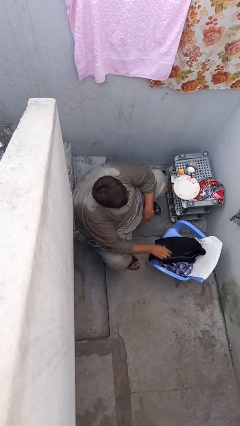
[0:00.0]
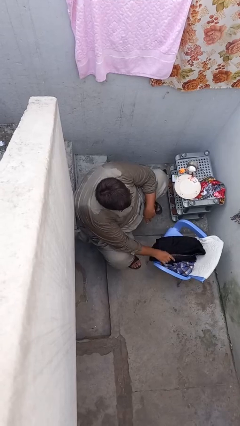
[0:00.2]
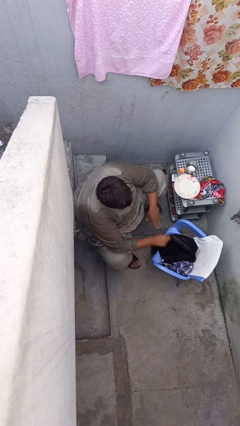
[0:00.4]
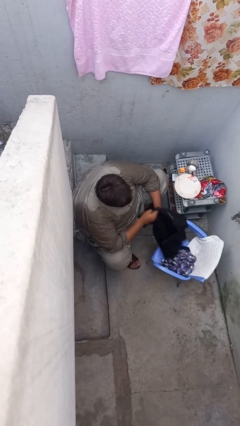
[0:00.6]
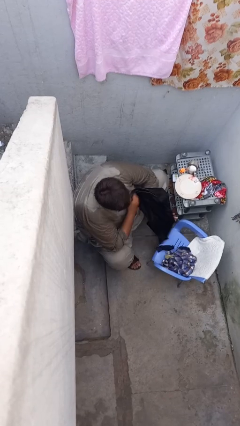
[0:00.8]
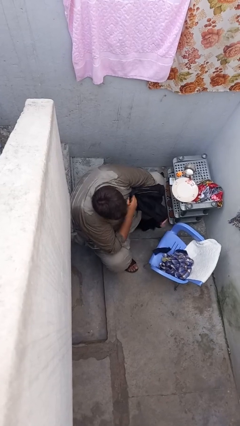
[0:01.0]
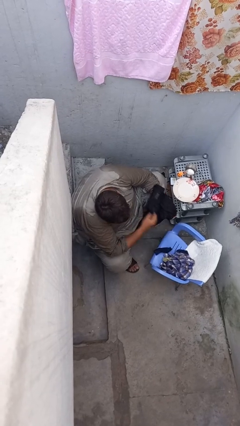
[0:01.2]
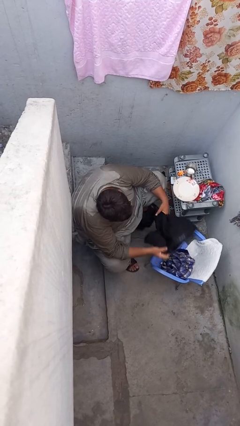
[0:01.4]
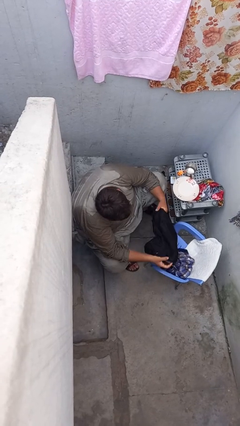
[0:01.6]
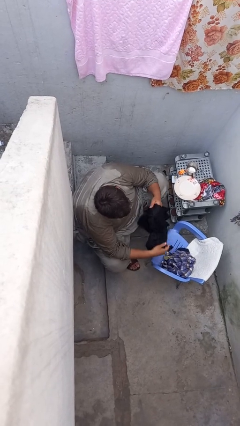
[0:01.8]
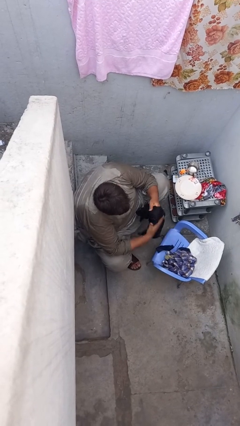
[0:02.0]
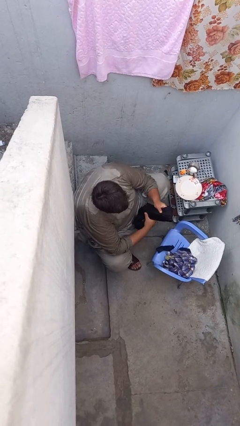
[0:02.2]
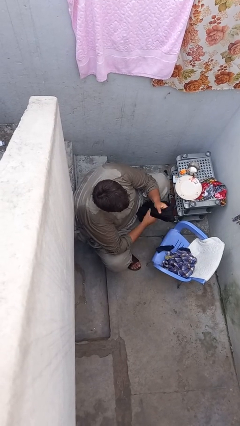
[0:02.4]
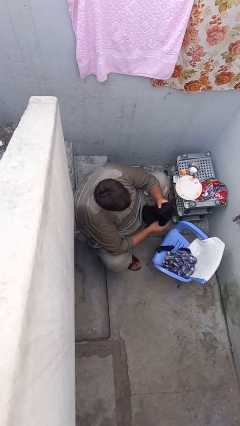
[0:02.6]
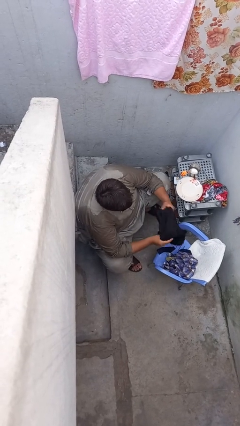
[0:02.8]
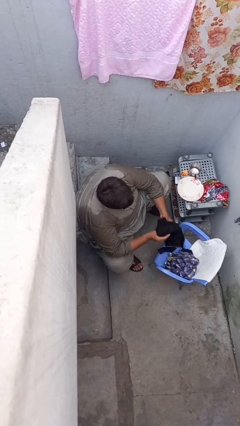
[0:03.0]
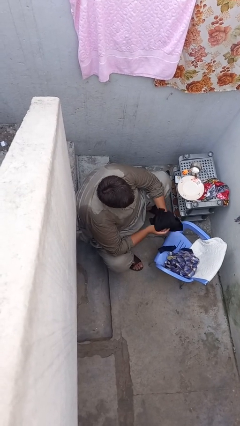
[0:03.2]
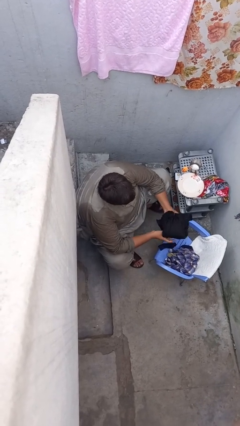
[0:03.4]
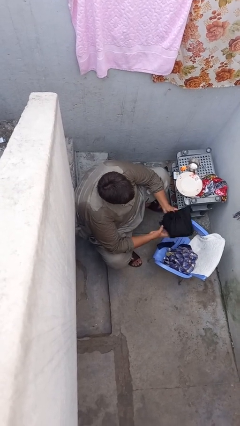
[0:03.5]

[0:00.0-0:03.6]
person folds pants

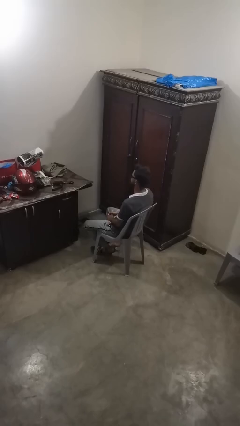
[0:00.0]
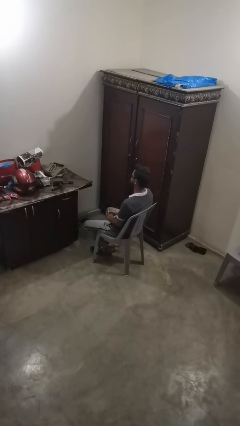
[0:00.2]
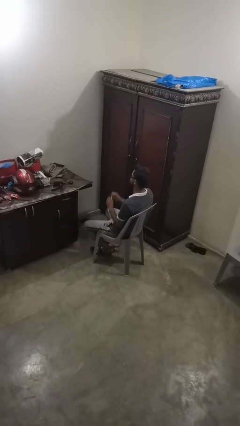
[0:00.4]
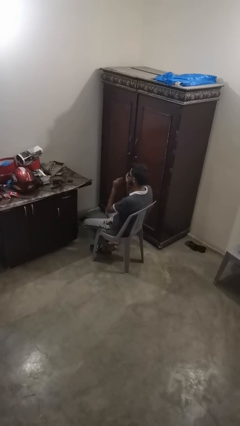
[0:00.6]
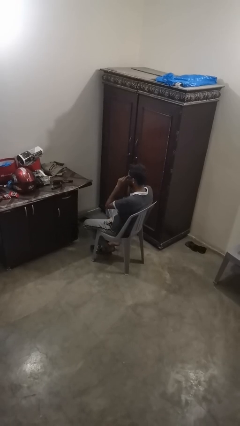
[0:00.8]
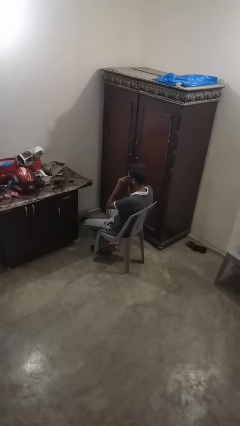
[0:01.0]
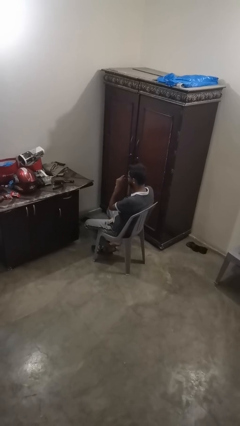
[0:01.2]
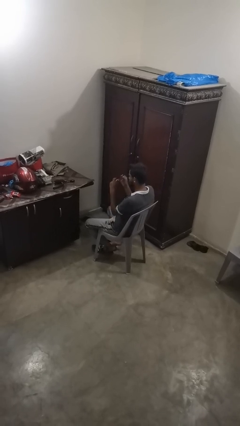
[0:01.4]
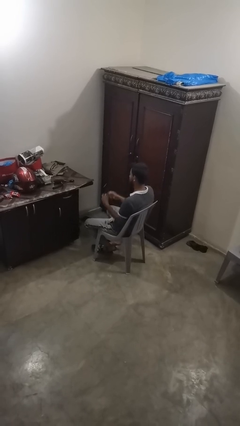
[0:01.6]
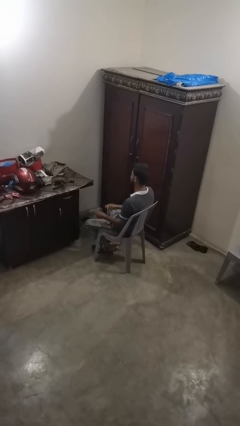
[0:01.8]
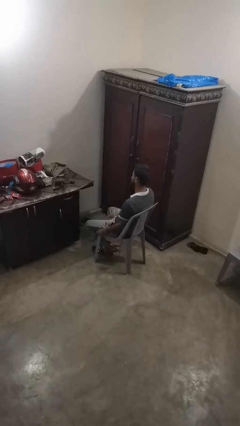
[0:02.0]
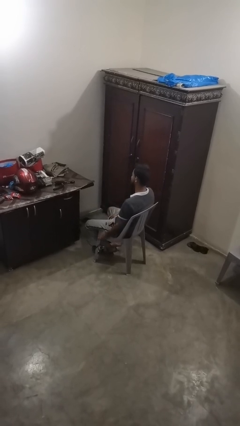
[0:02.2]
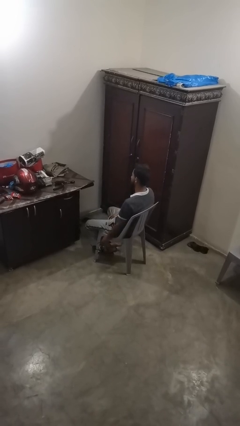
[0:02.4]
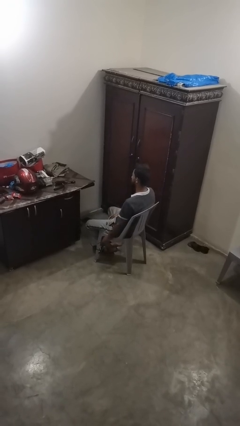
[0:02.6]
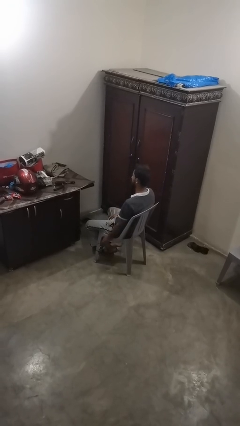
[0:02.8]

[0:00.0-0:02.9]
person takes off sunglasses

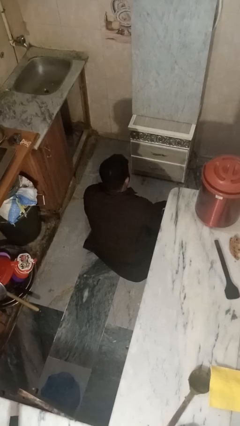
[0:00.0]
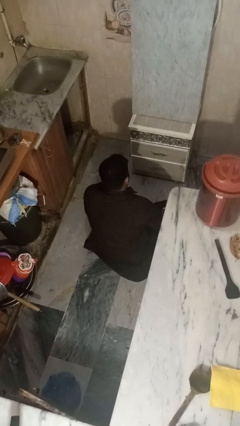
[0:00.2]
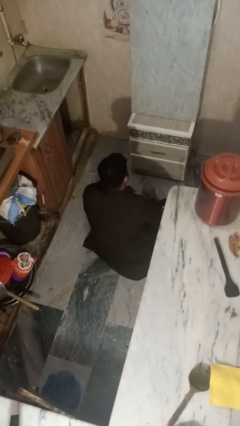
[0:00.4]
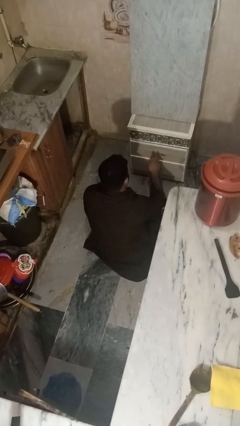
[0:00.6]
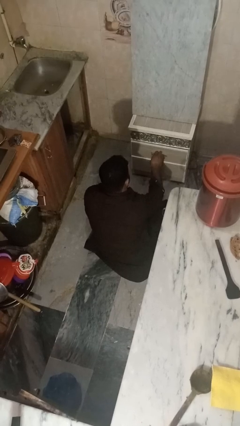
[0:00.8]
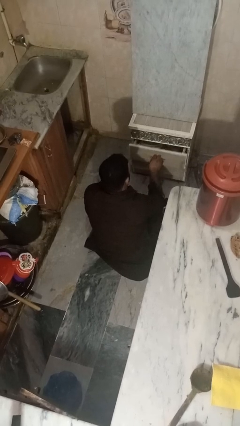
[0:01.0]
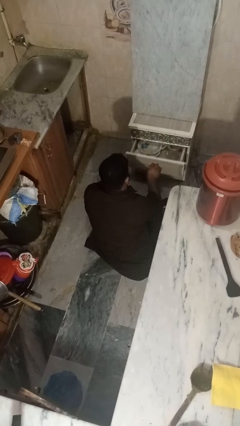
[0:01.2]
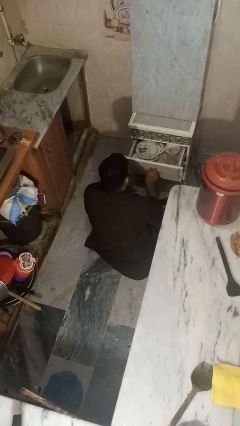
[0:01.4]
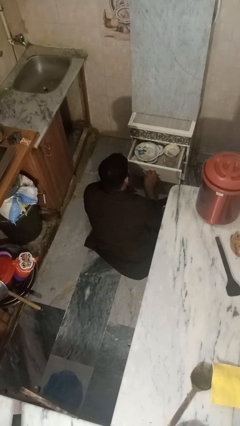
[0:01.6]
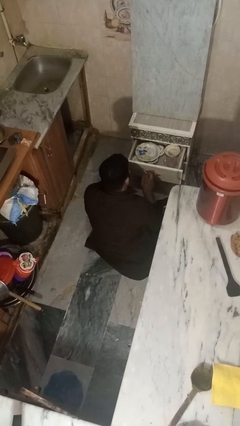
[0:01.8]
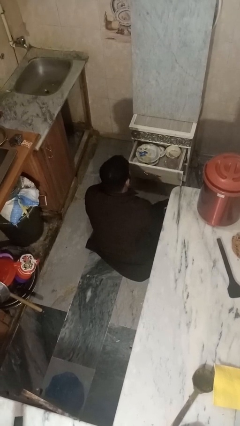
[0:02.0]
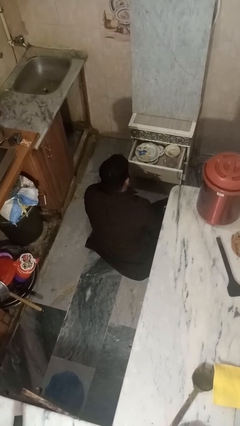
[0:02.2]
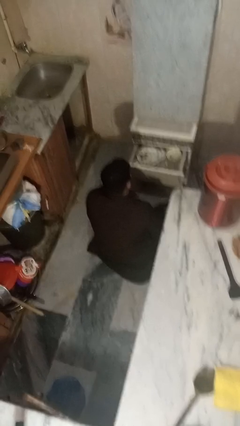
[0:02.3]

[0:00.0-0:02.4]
person opens kitchen drawer

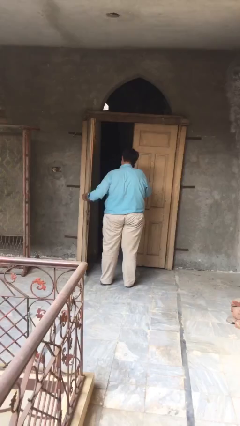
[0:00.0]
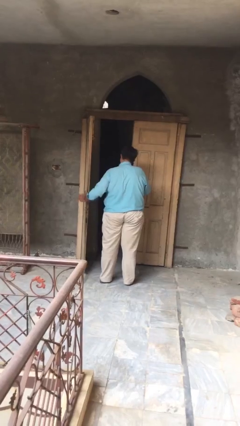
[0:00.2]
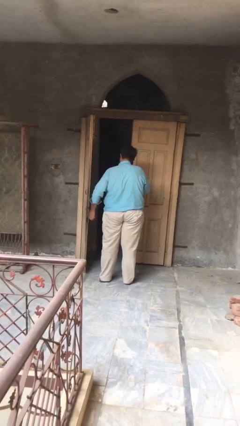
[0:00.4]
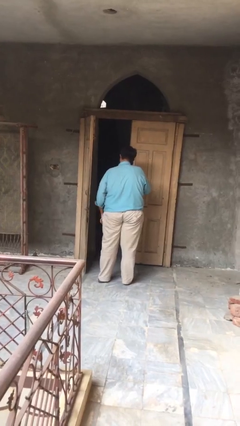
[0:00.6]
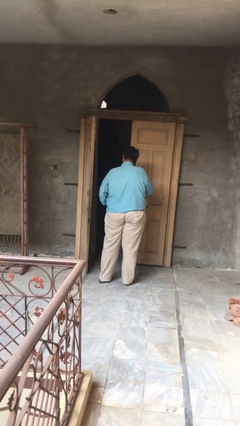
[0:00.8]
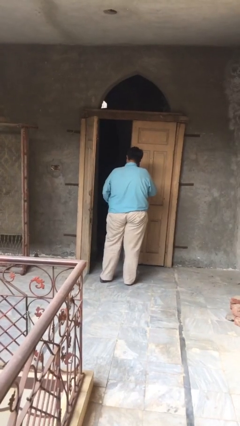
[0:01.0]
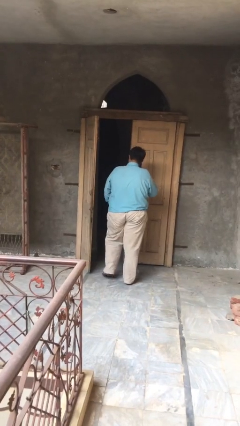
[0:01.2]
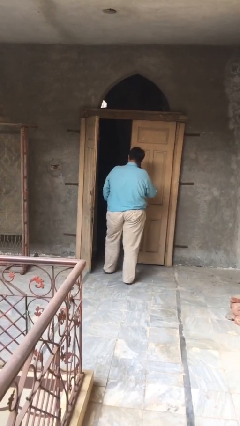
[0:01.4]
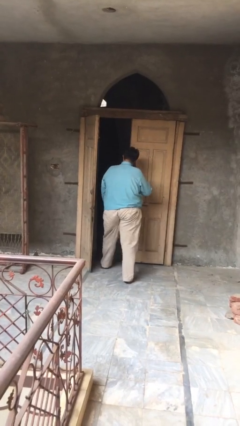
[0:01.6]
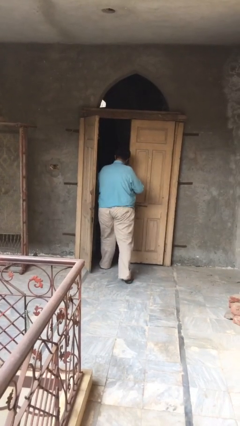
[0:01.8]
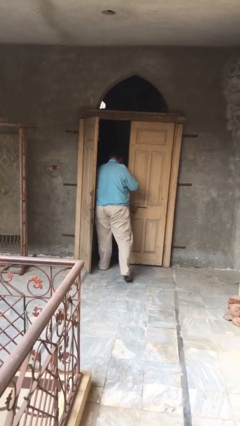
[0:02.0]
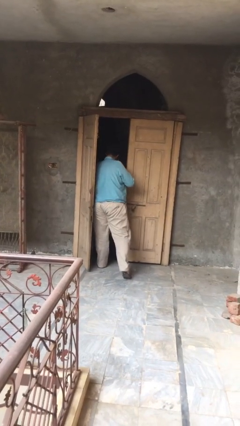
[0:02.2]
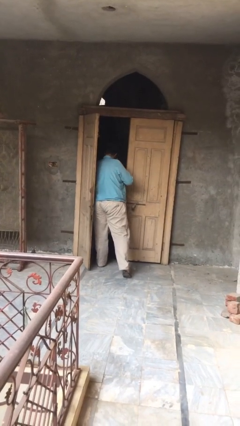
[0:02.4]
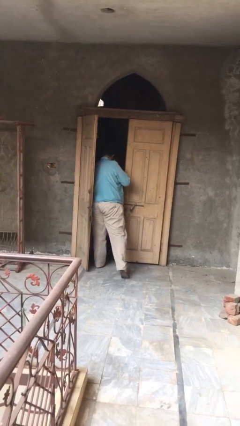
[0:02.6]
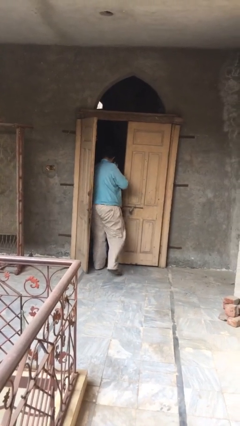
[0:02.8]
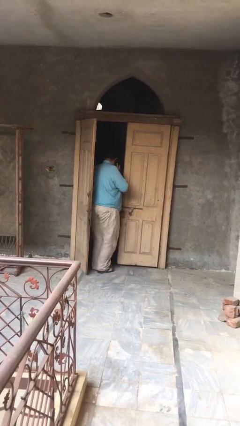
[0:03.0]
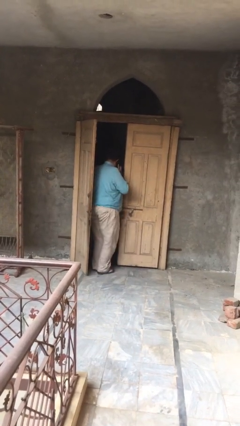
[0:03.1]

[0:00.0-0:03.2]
person exits scene through structure

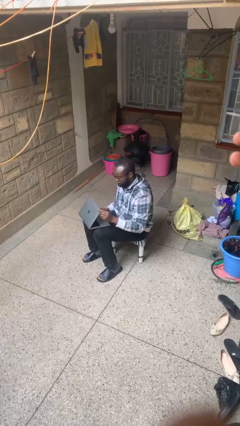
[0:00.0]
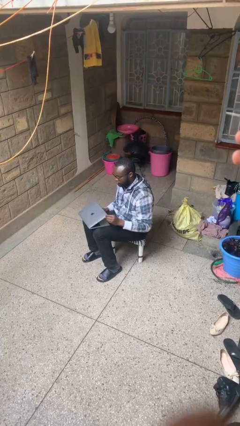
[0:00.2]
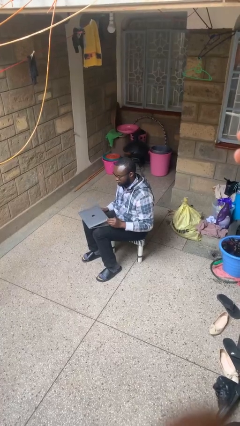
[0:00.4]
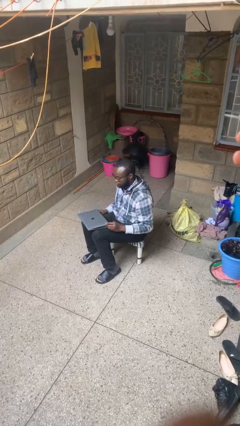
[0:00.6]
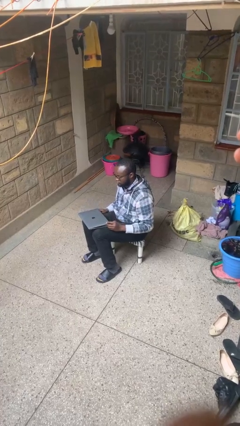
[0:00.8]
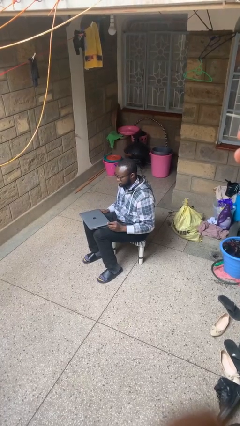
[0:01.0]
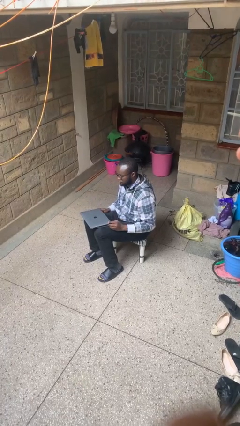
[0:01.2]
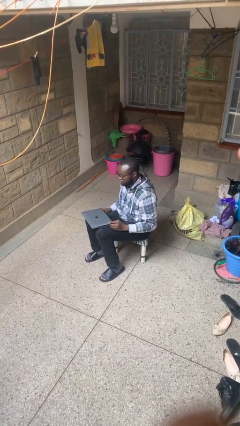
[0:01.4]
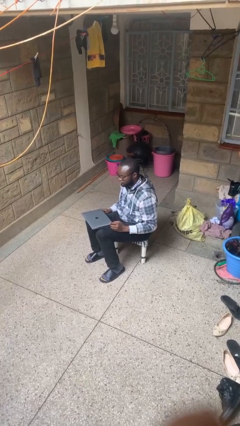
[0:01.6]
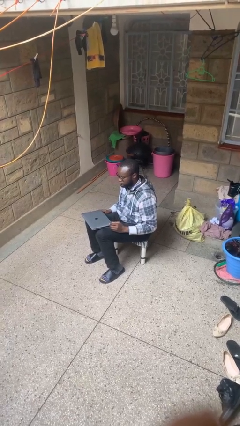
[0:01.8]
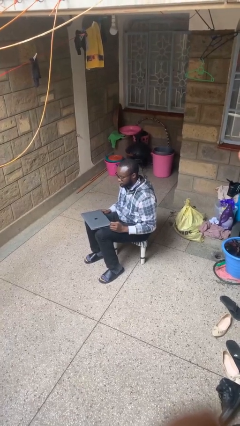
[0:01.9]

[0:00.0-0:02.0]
person closes laptop

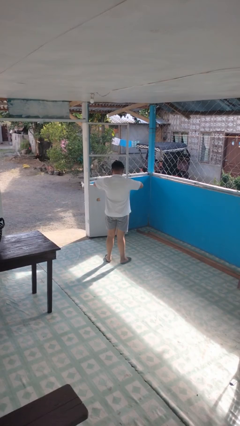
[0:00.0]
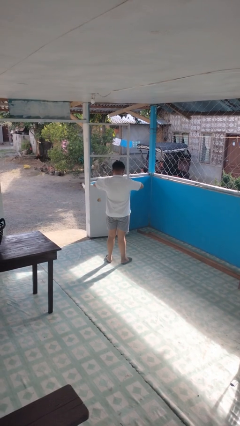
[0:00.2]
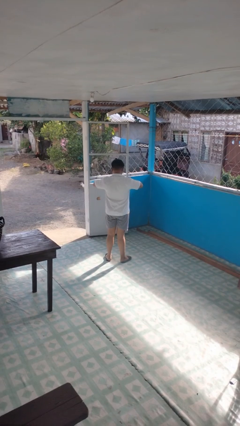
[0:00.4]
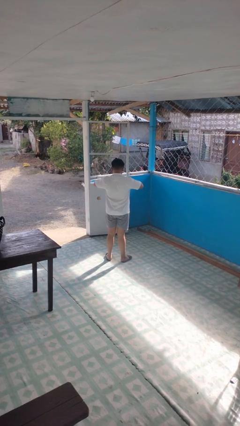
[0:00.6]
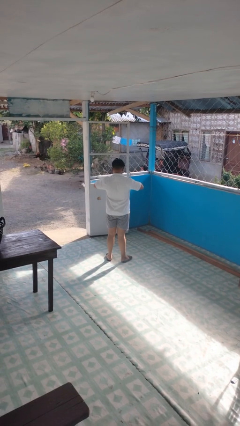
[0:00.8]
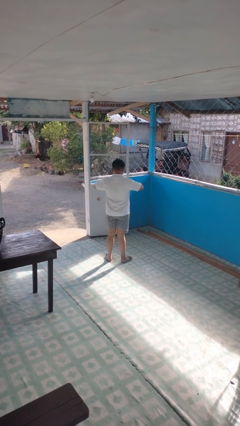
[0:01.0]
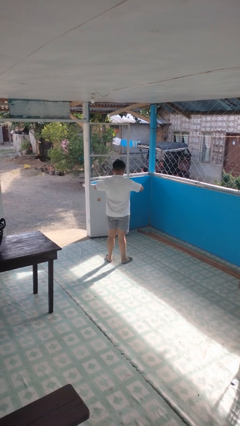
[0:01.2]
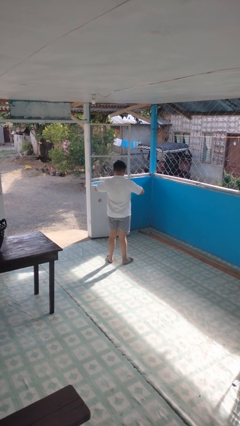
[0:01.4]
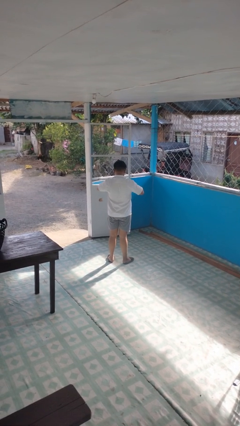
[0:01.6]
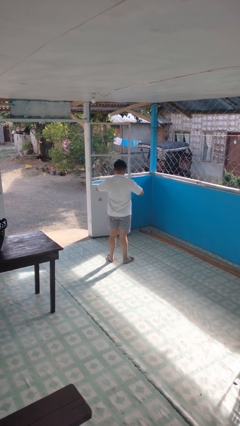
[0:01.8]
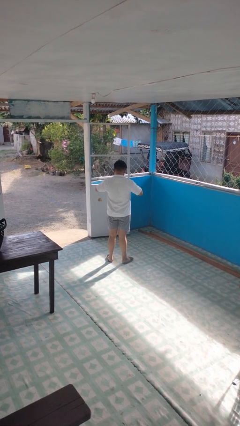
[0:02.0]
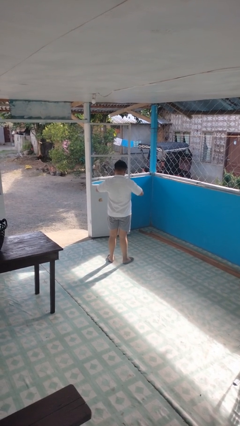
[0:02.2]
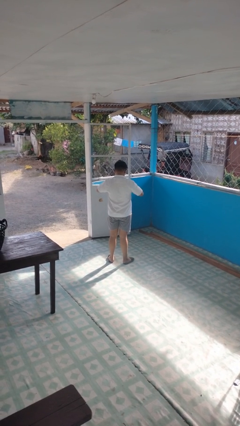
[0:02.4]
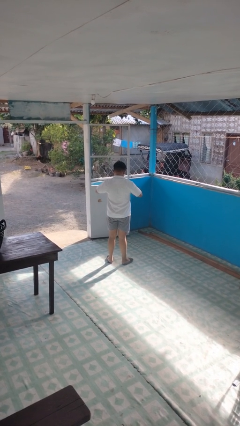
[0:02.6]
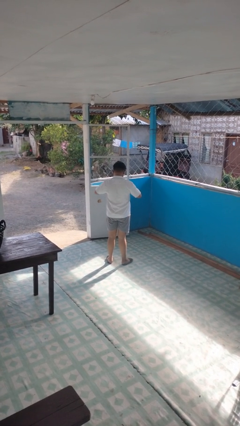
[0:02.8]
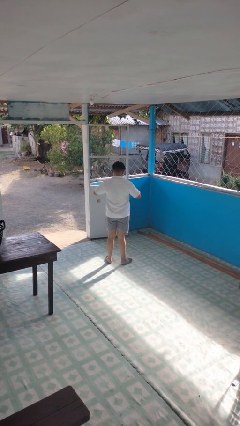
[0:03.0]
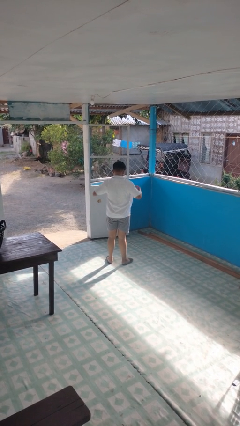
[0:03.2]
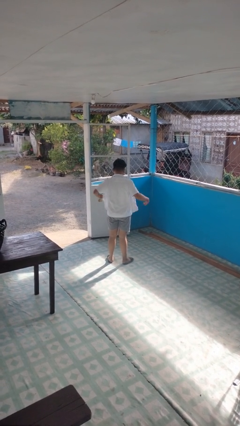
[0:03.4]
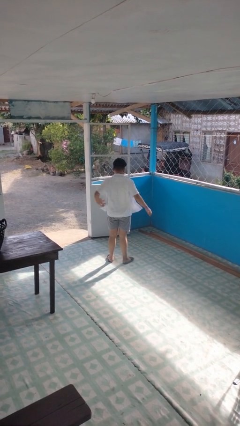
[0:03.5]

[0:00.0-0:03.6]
person unbuttons shirt
